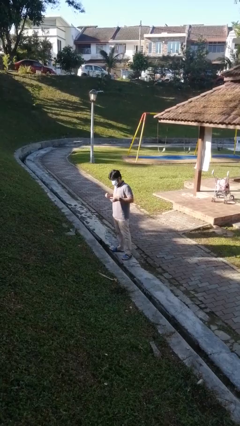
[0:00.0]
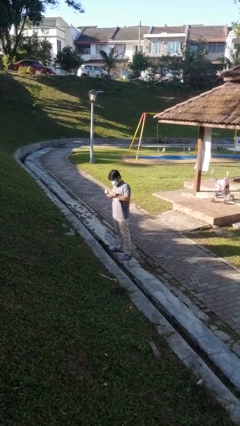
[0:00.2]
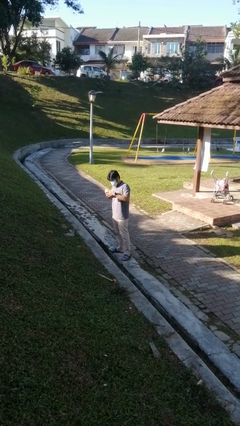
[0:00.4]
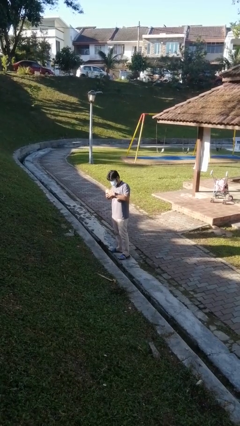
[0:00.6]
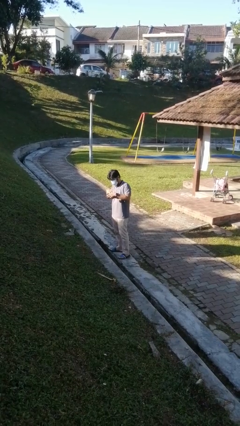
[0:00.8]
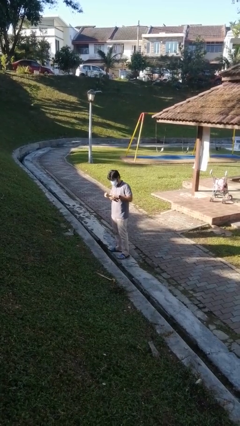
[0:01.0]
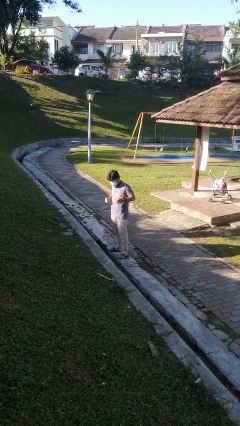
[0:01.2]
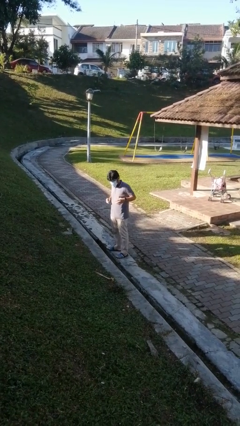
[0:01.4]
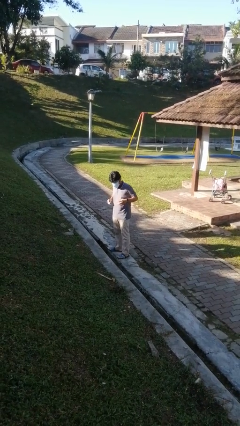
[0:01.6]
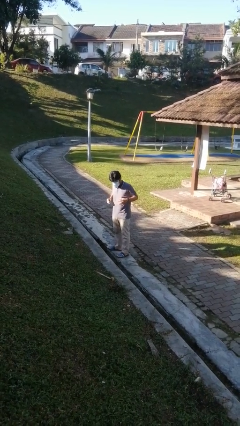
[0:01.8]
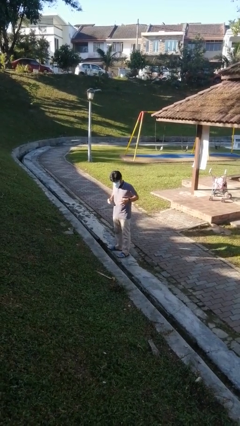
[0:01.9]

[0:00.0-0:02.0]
person puts on ring

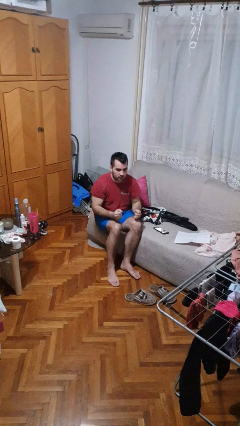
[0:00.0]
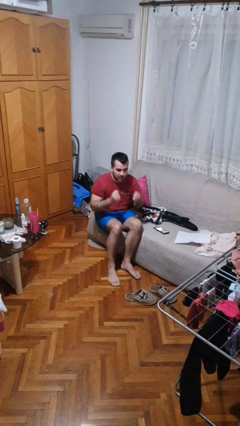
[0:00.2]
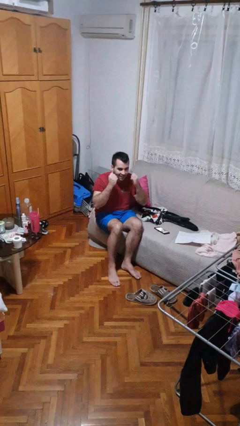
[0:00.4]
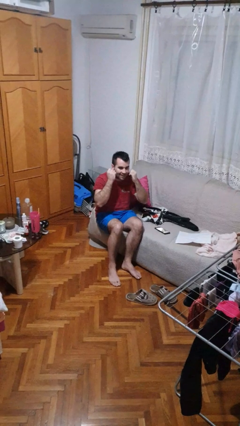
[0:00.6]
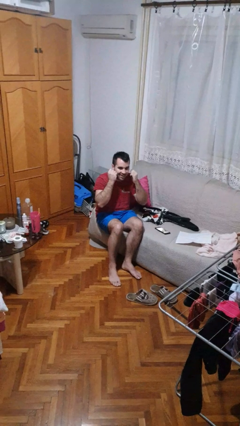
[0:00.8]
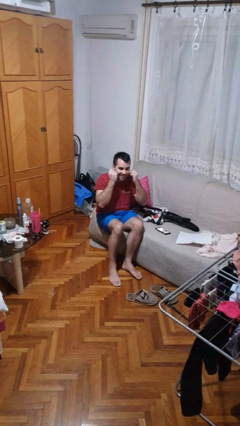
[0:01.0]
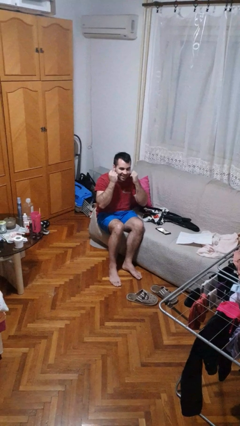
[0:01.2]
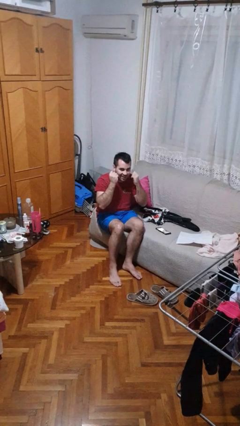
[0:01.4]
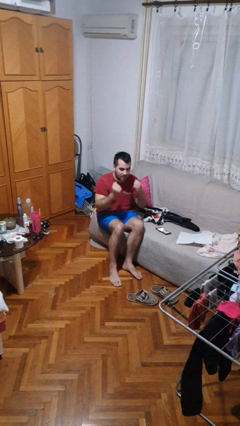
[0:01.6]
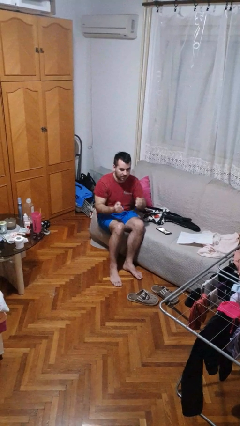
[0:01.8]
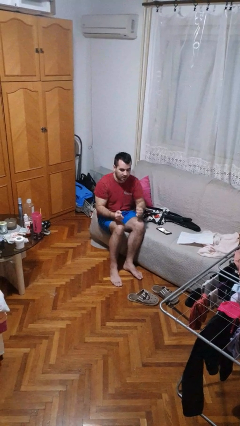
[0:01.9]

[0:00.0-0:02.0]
person flosses

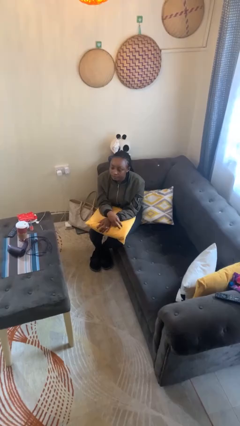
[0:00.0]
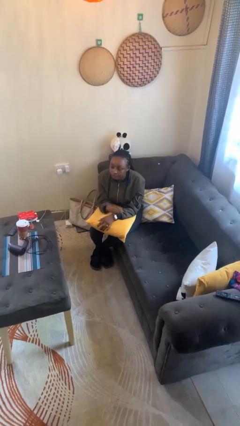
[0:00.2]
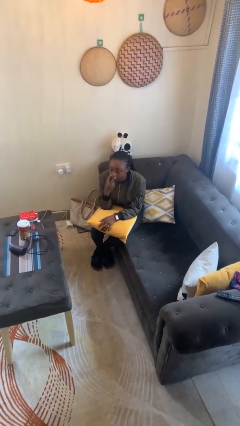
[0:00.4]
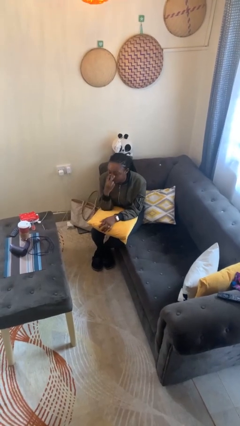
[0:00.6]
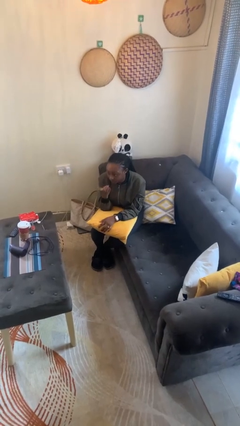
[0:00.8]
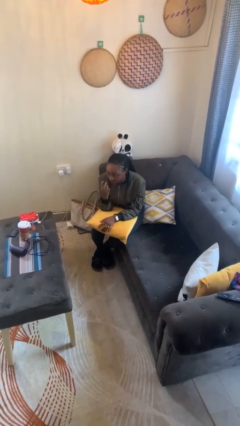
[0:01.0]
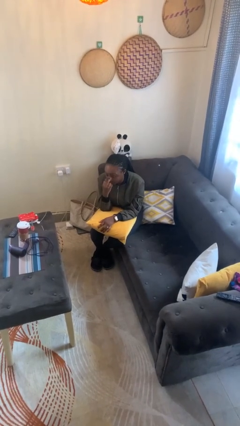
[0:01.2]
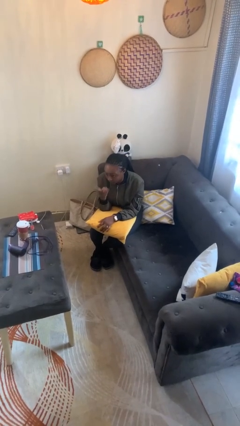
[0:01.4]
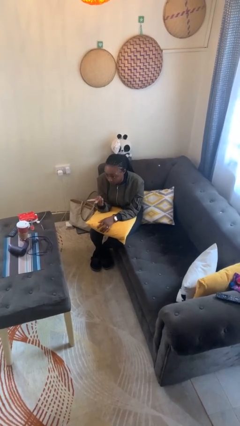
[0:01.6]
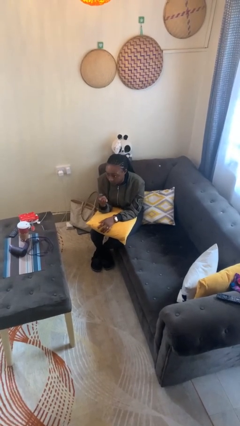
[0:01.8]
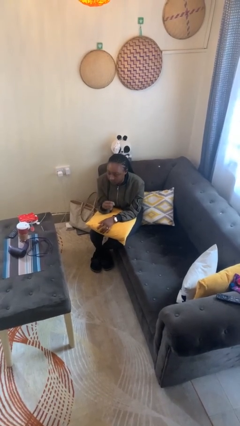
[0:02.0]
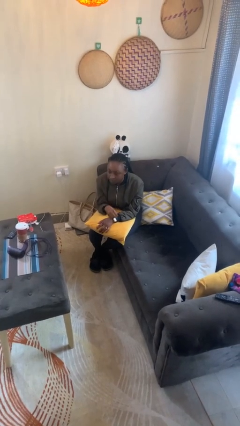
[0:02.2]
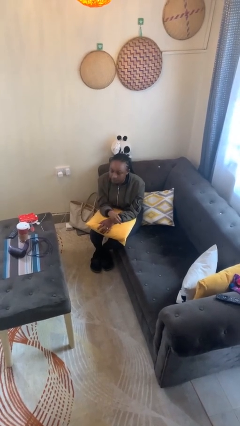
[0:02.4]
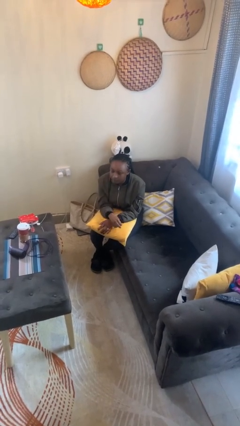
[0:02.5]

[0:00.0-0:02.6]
person gestures watch closely

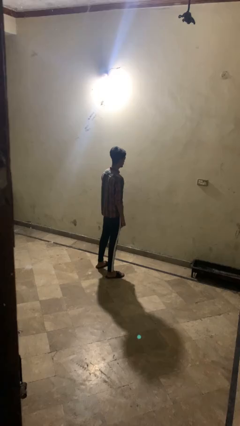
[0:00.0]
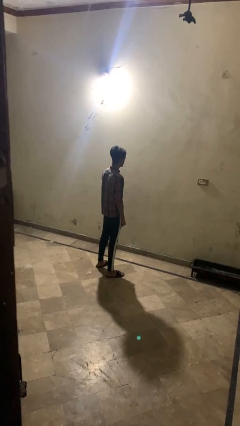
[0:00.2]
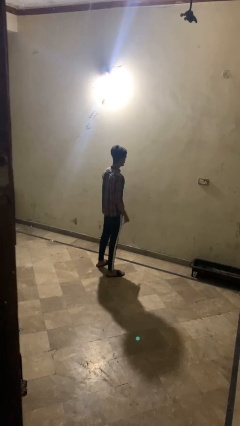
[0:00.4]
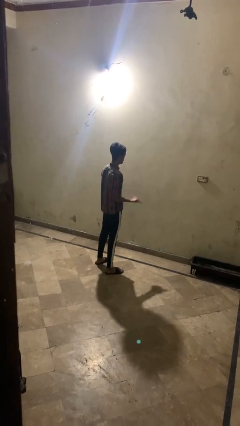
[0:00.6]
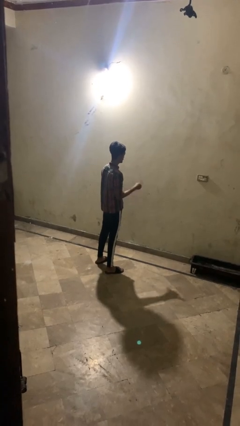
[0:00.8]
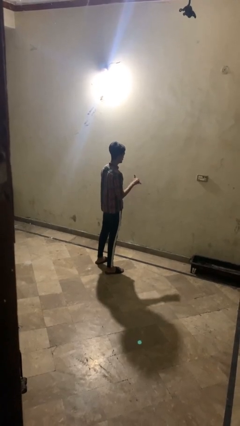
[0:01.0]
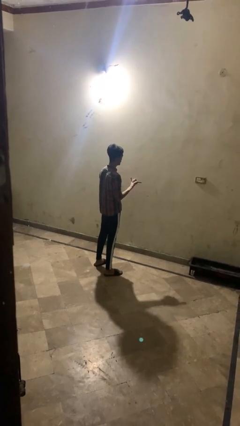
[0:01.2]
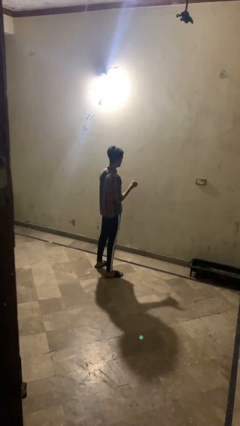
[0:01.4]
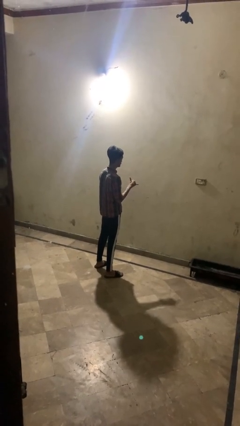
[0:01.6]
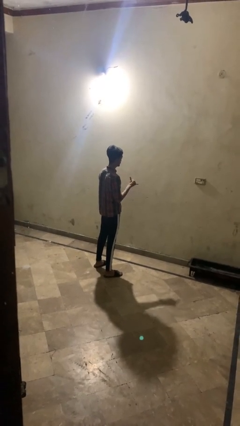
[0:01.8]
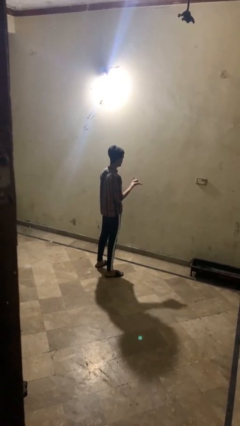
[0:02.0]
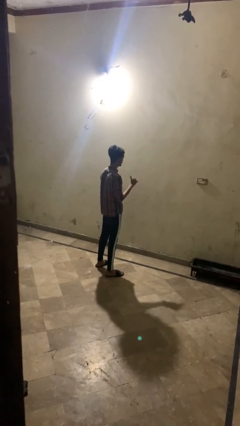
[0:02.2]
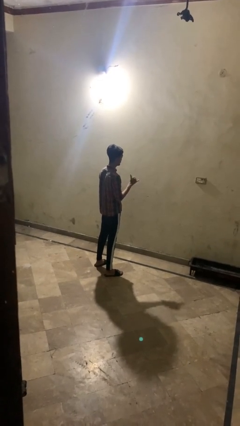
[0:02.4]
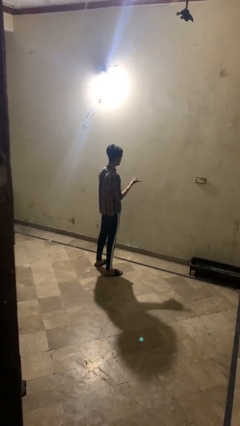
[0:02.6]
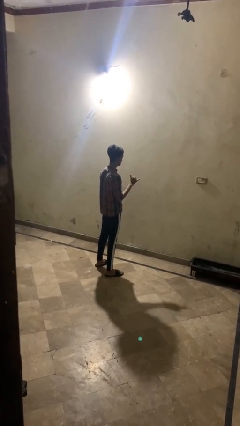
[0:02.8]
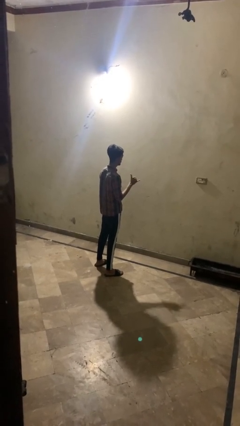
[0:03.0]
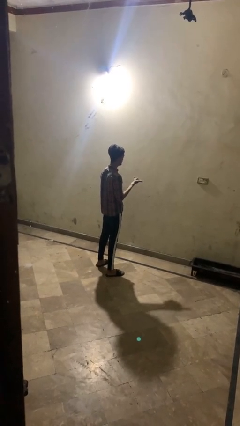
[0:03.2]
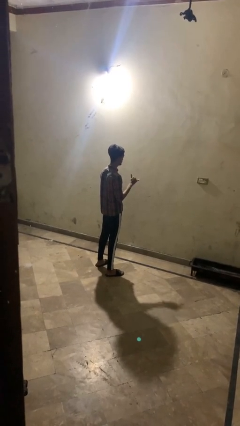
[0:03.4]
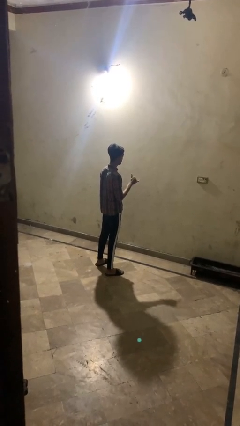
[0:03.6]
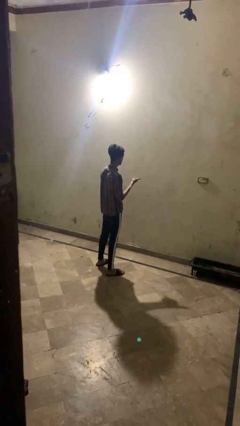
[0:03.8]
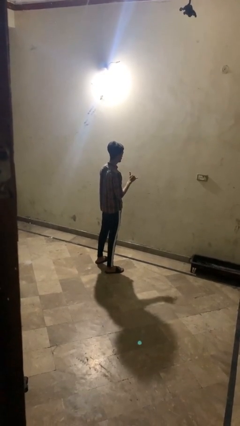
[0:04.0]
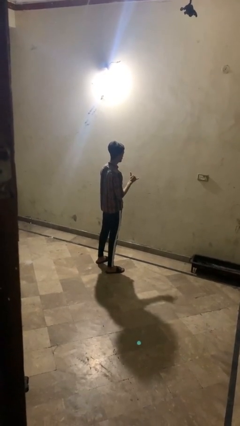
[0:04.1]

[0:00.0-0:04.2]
person gestures hang loose

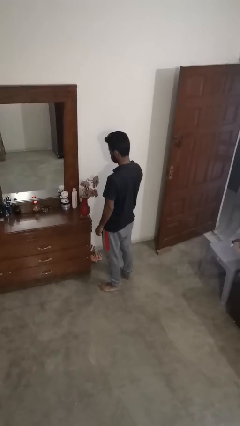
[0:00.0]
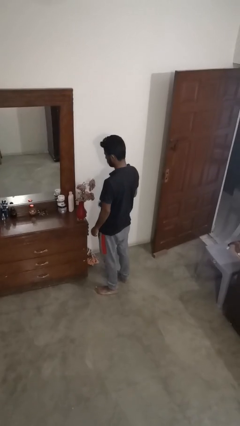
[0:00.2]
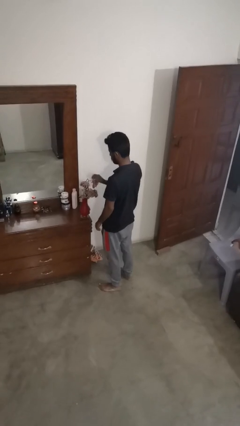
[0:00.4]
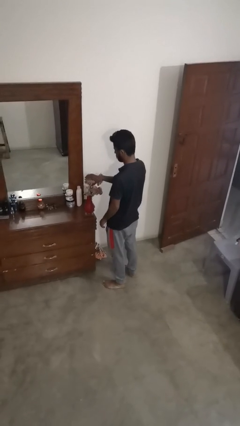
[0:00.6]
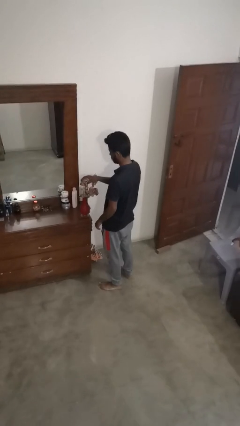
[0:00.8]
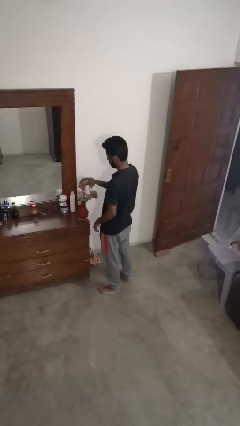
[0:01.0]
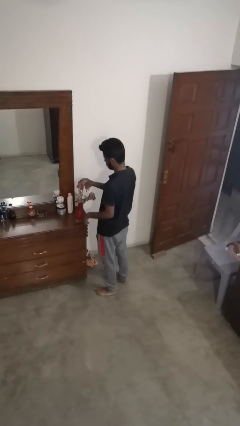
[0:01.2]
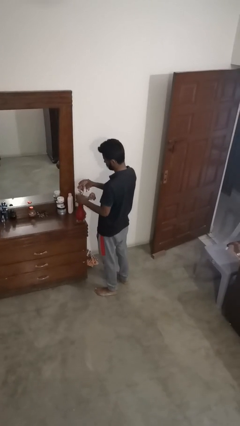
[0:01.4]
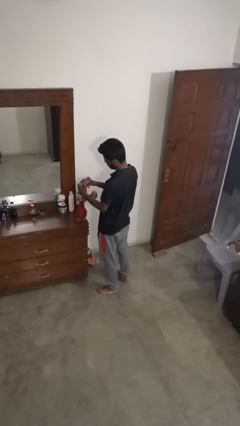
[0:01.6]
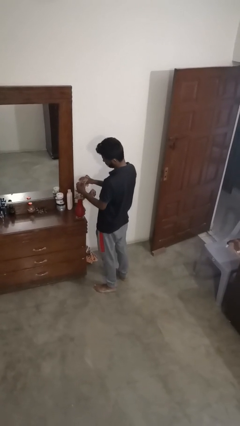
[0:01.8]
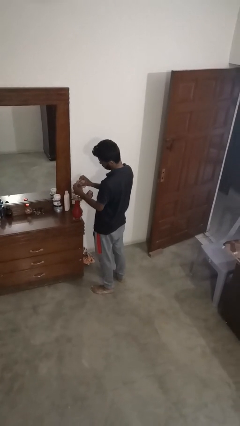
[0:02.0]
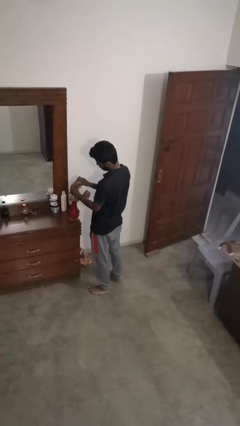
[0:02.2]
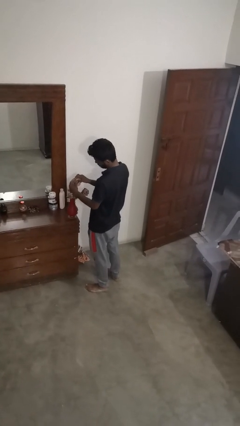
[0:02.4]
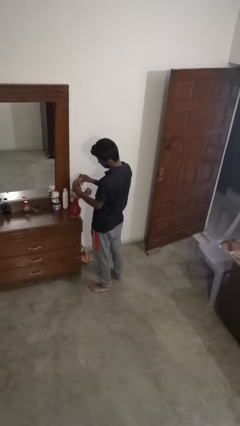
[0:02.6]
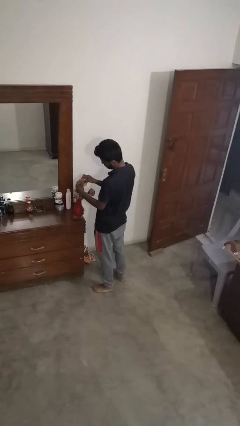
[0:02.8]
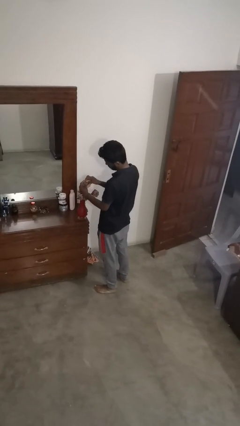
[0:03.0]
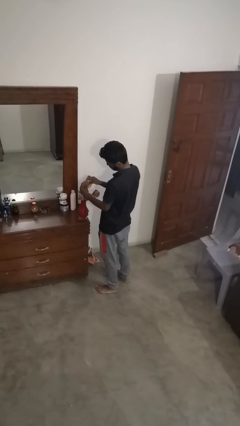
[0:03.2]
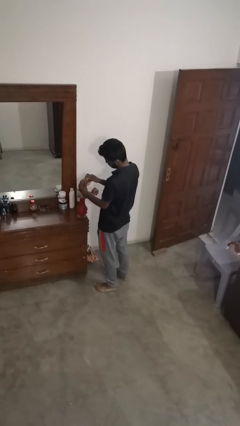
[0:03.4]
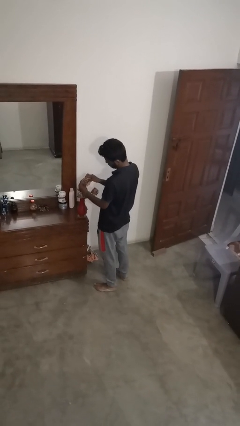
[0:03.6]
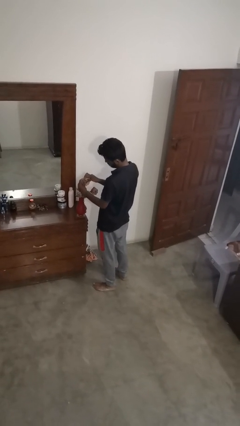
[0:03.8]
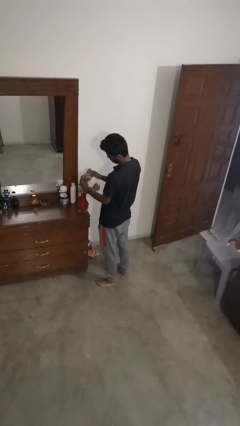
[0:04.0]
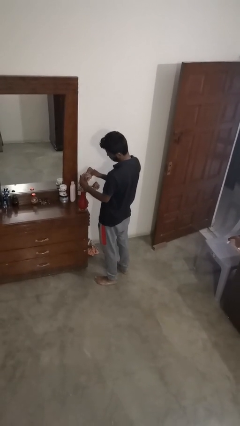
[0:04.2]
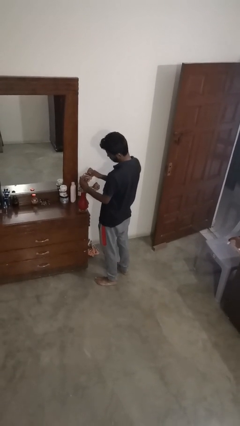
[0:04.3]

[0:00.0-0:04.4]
person arranges flowers in vase

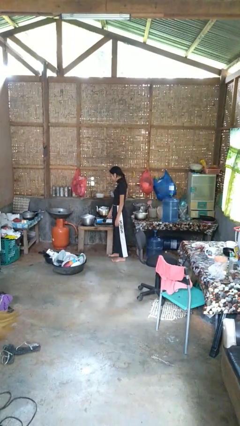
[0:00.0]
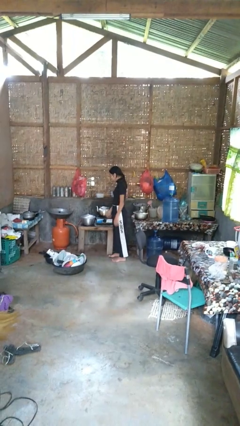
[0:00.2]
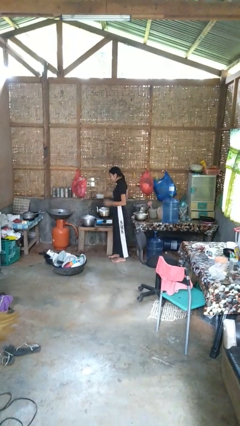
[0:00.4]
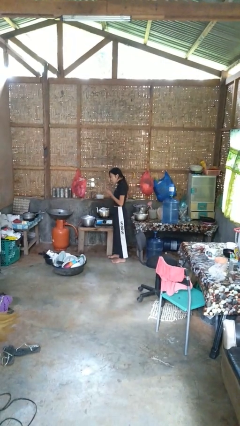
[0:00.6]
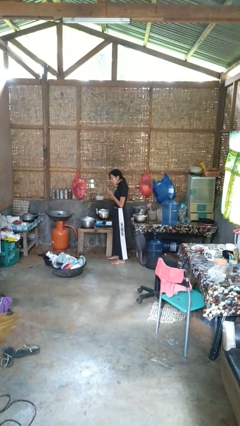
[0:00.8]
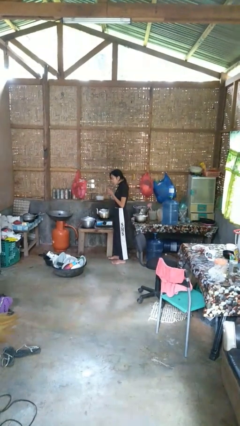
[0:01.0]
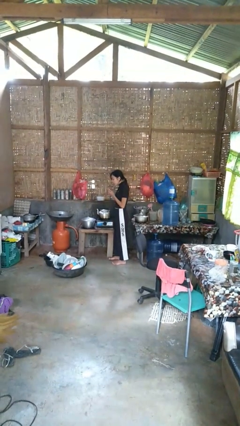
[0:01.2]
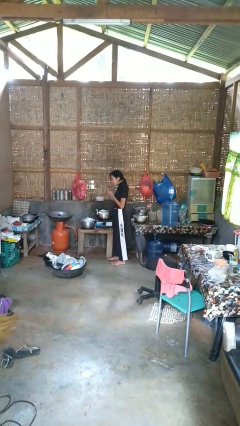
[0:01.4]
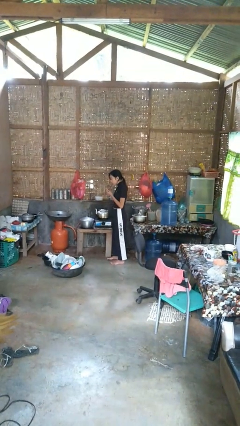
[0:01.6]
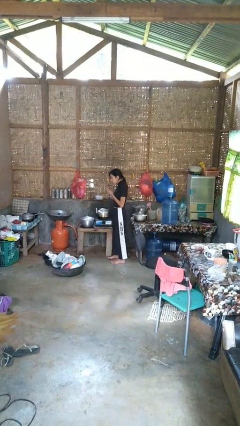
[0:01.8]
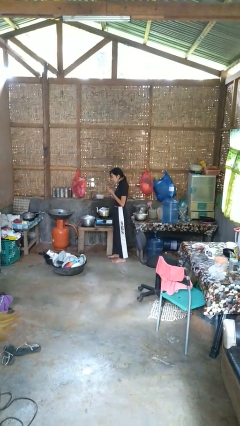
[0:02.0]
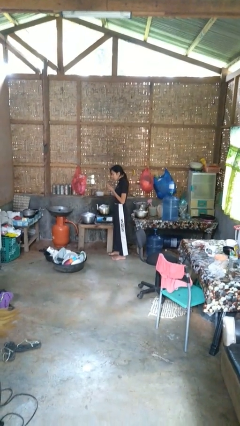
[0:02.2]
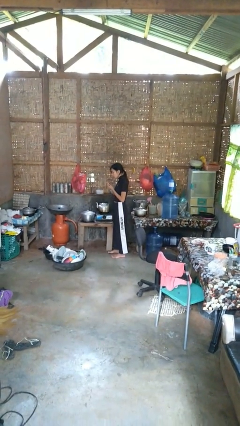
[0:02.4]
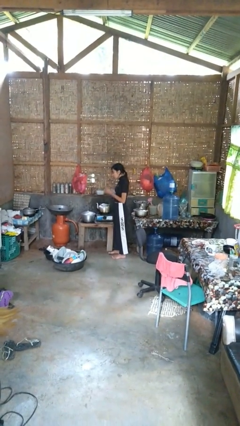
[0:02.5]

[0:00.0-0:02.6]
person burns hand
